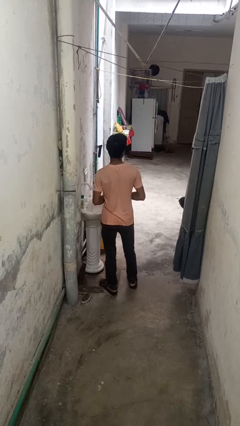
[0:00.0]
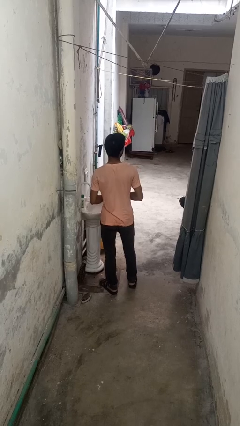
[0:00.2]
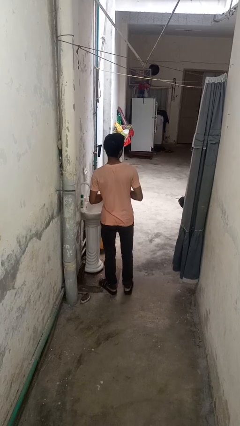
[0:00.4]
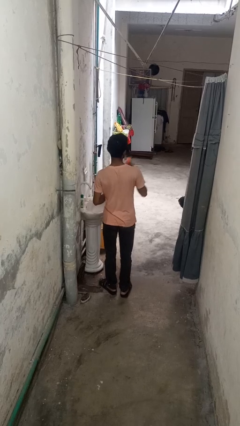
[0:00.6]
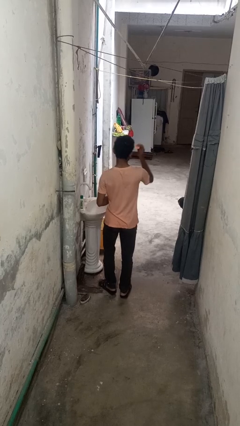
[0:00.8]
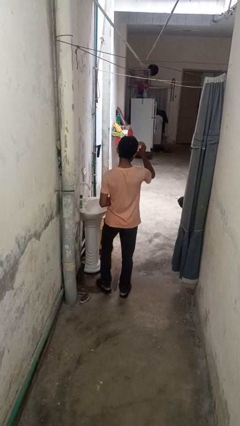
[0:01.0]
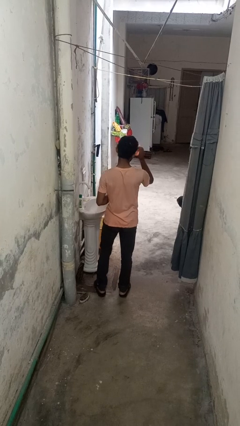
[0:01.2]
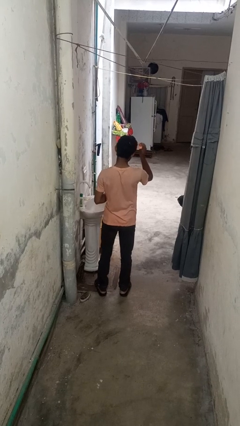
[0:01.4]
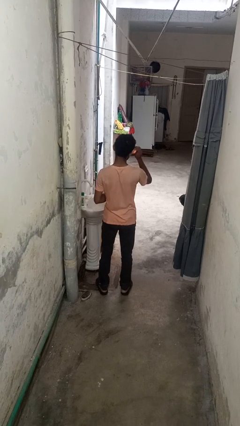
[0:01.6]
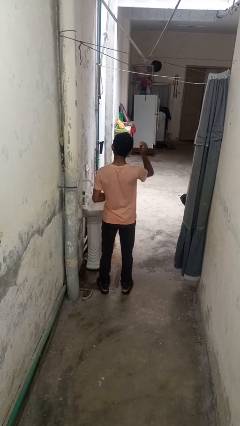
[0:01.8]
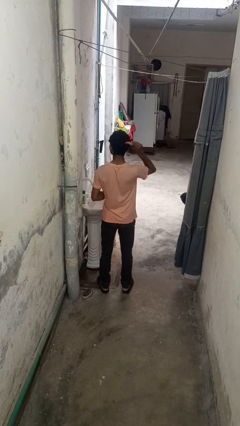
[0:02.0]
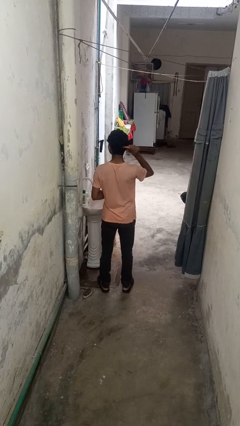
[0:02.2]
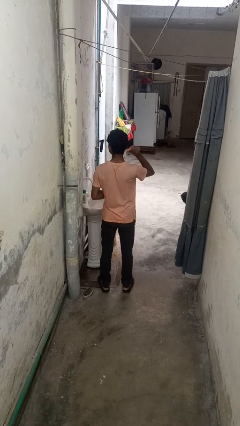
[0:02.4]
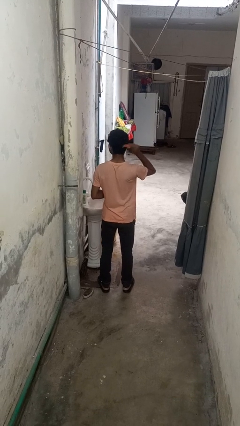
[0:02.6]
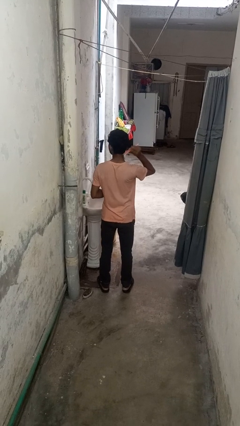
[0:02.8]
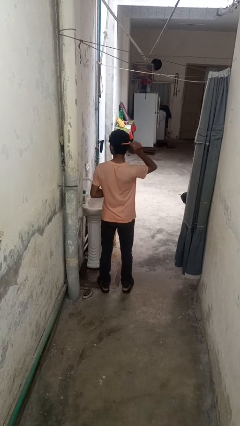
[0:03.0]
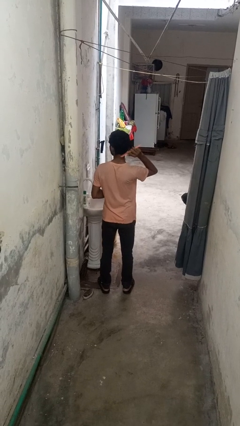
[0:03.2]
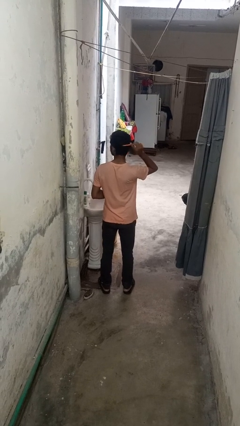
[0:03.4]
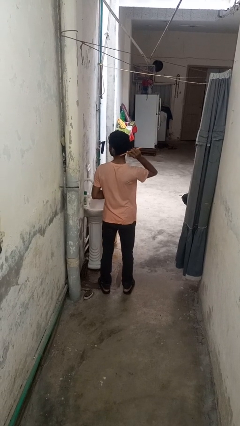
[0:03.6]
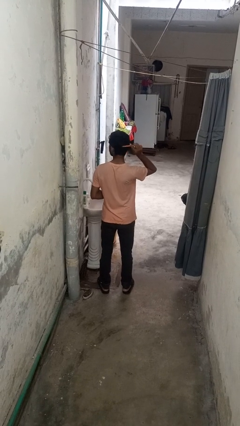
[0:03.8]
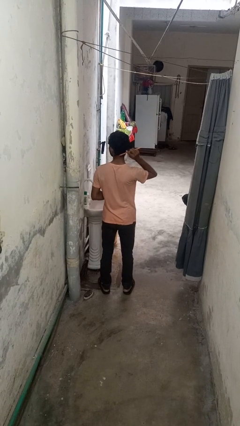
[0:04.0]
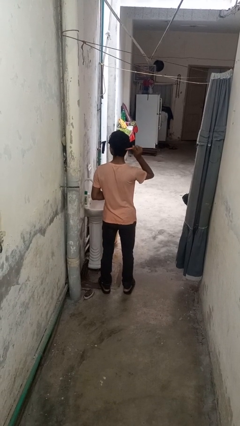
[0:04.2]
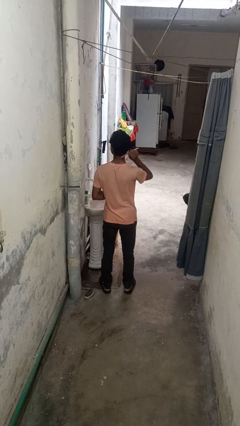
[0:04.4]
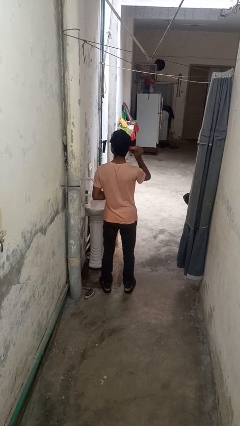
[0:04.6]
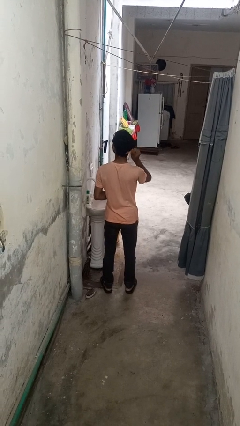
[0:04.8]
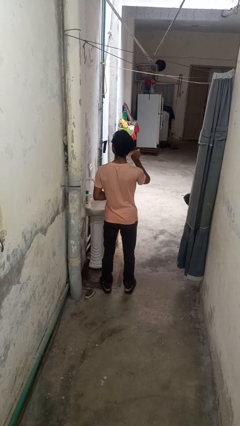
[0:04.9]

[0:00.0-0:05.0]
person brushes hair

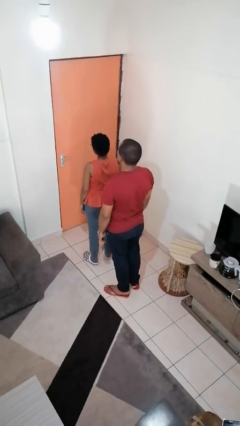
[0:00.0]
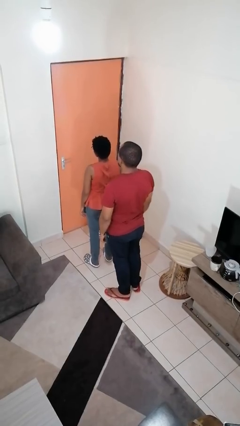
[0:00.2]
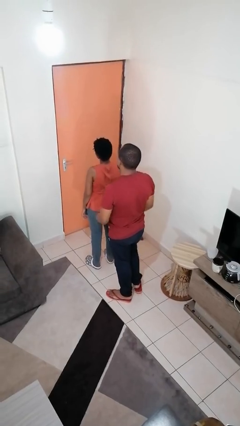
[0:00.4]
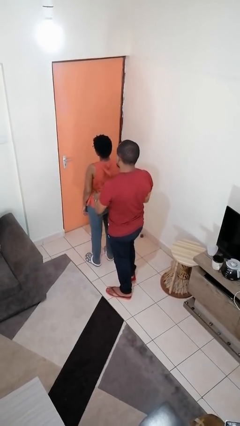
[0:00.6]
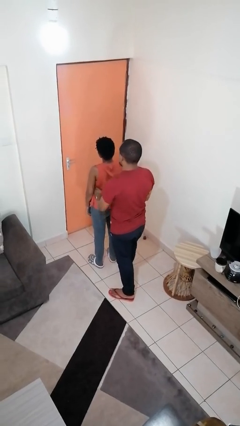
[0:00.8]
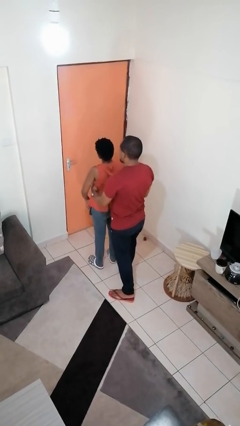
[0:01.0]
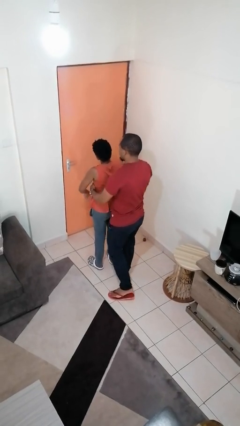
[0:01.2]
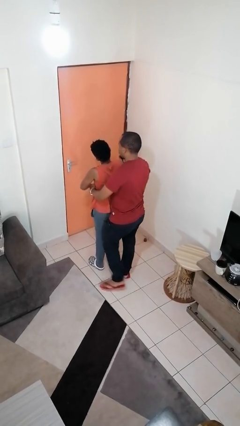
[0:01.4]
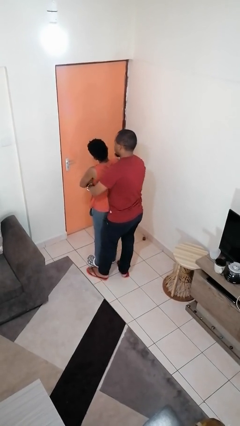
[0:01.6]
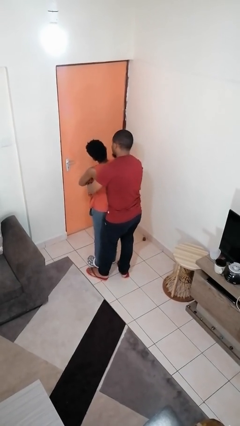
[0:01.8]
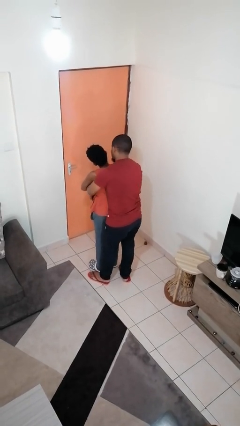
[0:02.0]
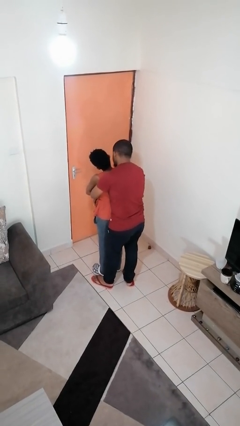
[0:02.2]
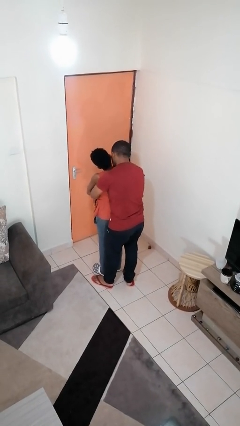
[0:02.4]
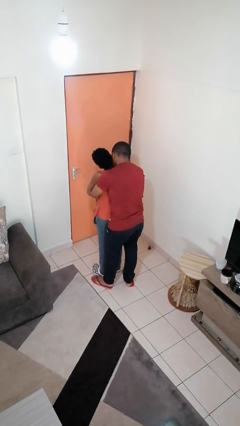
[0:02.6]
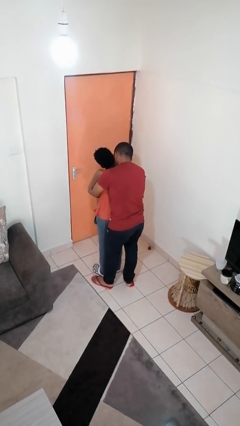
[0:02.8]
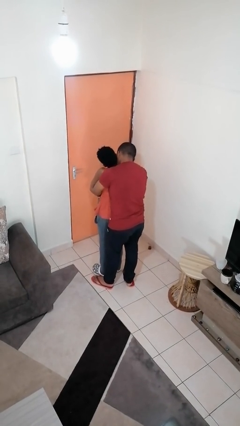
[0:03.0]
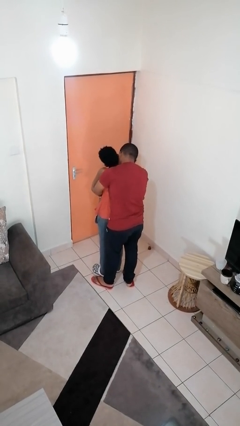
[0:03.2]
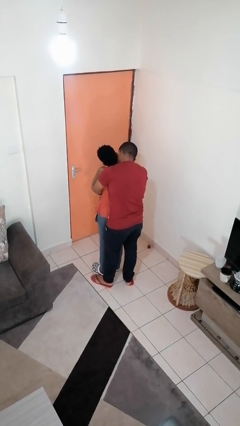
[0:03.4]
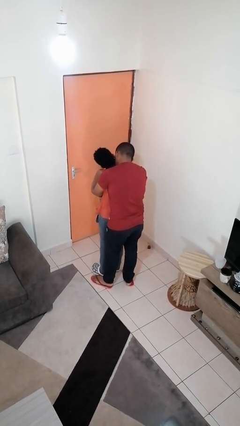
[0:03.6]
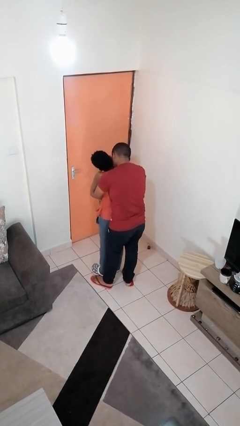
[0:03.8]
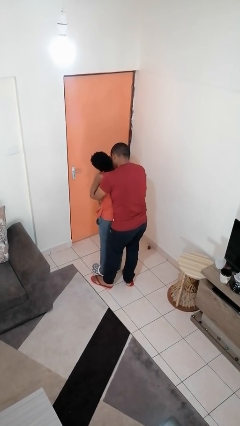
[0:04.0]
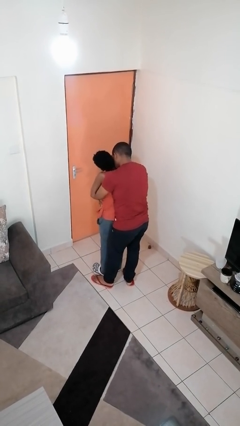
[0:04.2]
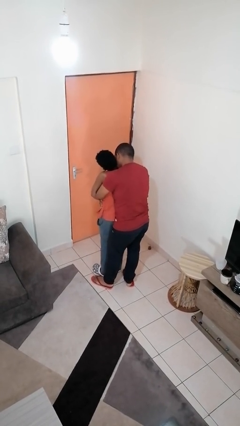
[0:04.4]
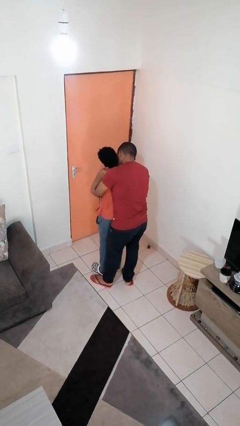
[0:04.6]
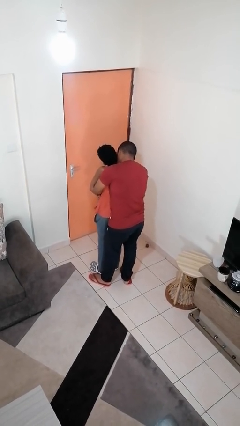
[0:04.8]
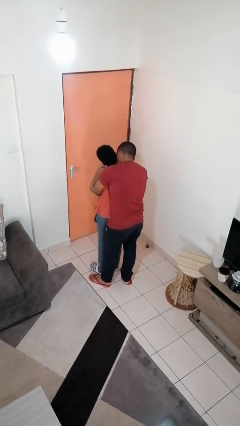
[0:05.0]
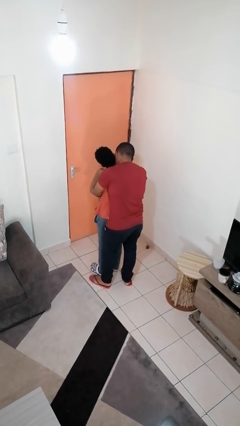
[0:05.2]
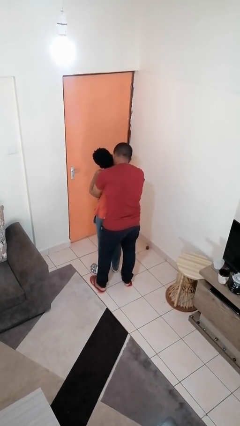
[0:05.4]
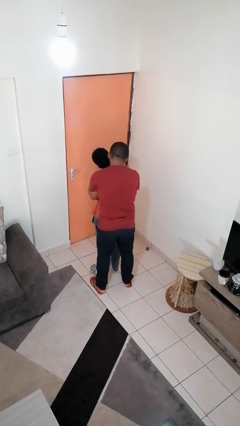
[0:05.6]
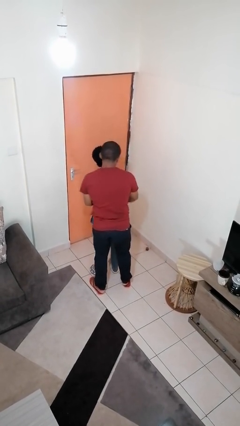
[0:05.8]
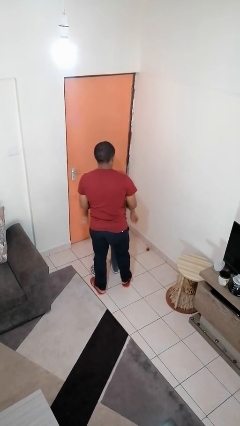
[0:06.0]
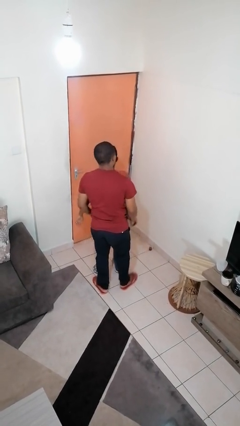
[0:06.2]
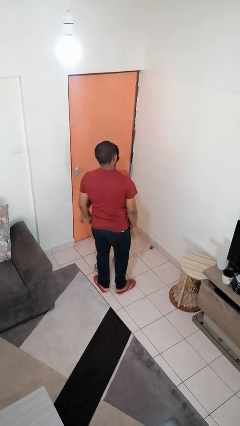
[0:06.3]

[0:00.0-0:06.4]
person hugs person from behind

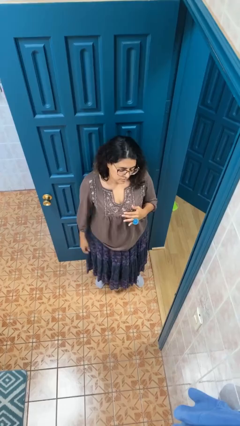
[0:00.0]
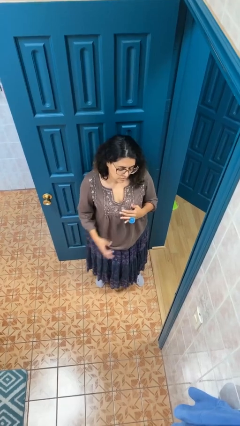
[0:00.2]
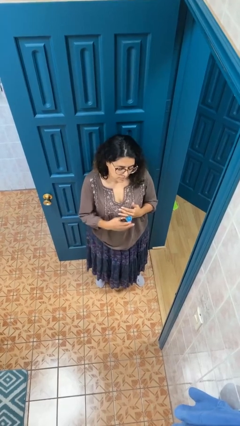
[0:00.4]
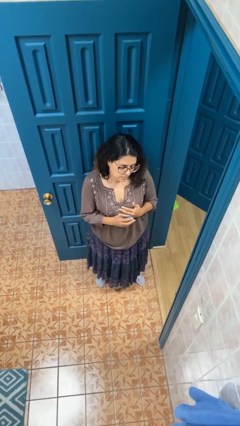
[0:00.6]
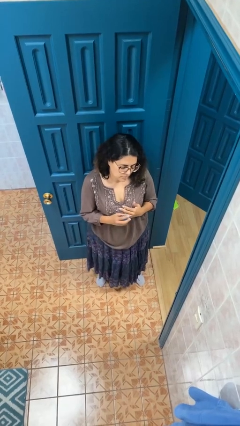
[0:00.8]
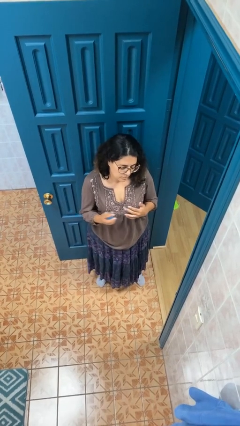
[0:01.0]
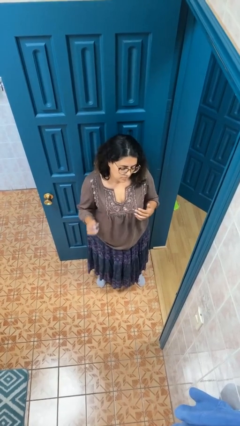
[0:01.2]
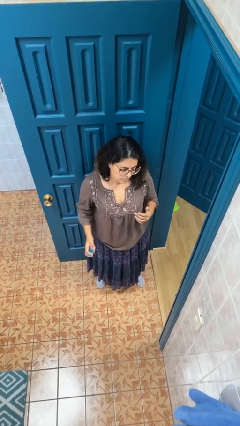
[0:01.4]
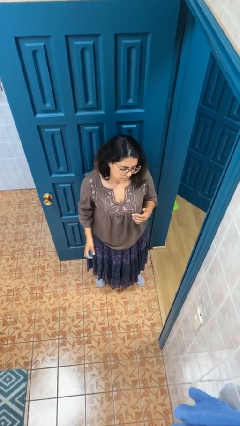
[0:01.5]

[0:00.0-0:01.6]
person takes off ring

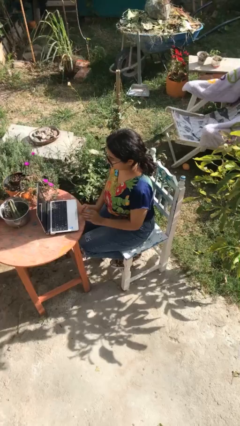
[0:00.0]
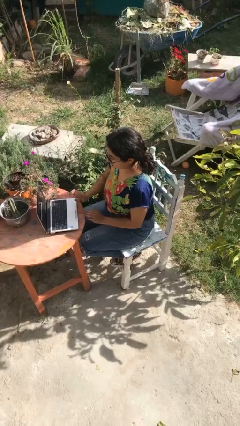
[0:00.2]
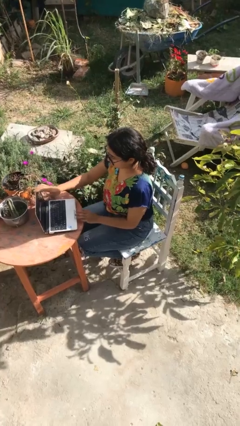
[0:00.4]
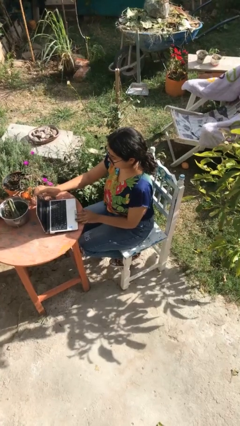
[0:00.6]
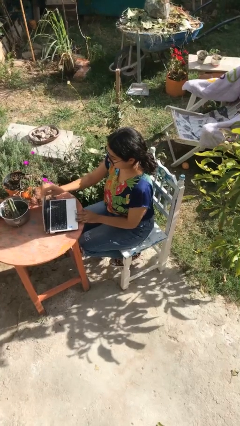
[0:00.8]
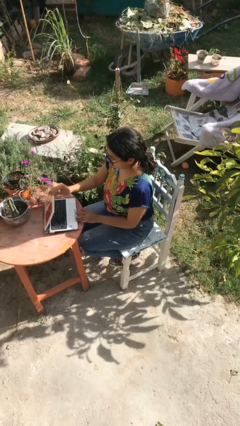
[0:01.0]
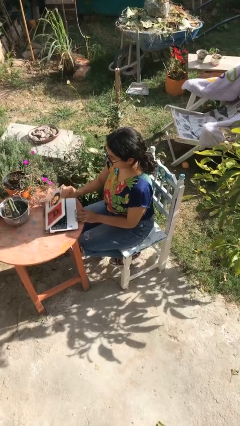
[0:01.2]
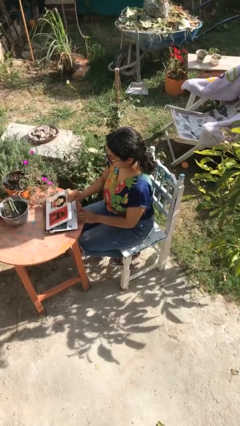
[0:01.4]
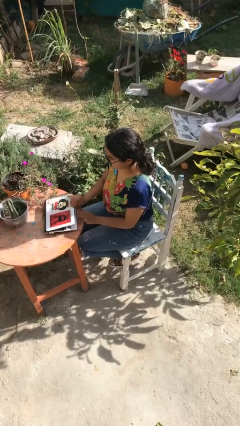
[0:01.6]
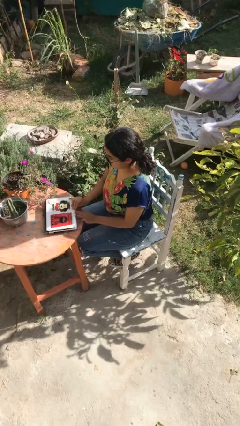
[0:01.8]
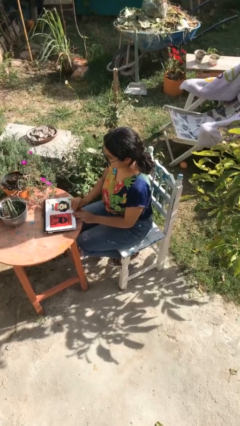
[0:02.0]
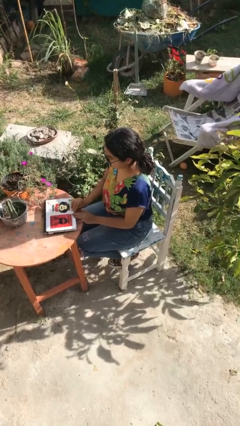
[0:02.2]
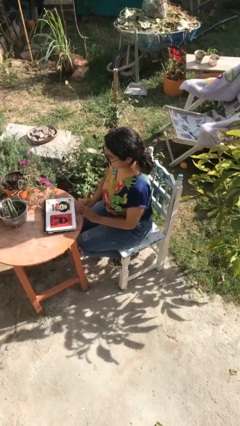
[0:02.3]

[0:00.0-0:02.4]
person closes laptop

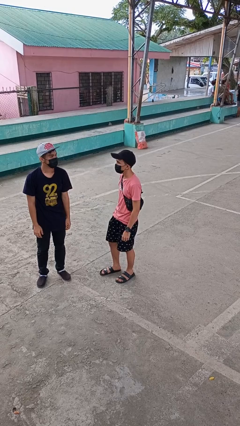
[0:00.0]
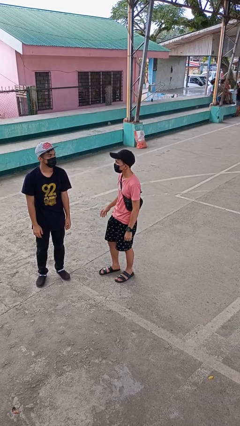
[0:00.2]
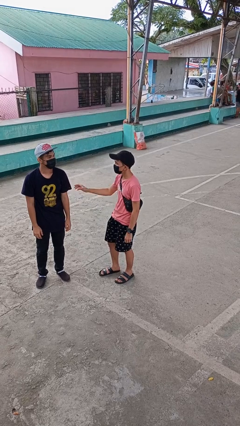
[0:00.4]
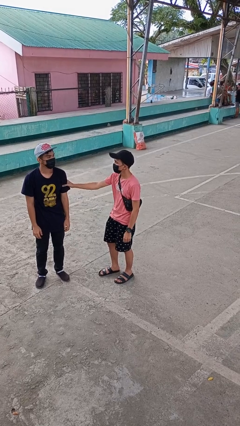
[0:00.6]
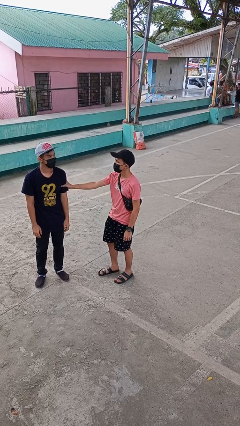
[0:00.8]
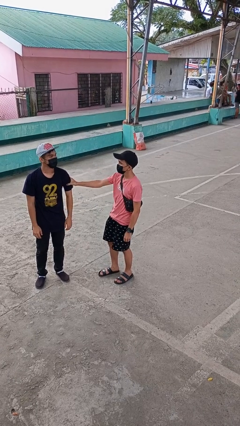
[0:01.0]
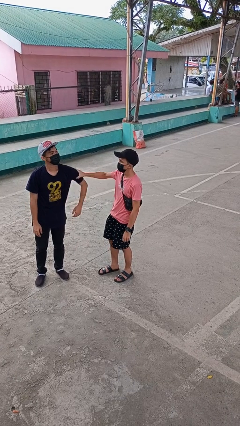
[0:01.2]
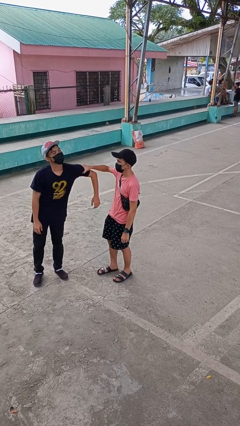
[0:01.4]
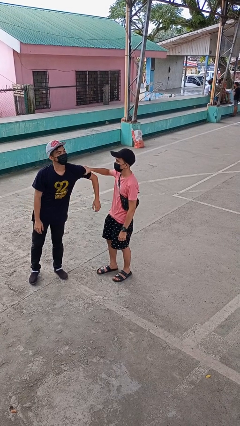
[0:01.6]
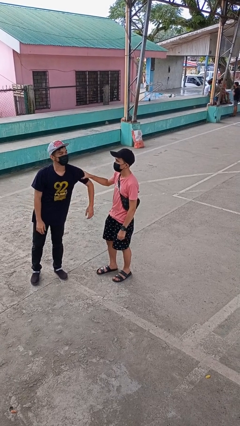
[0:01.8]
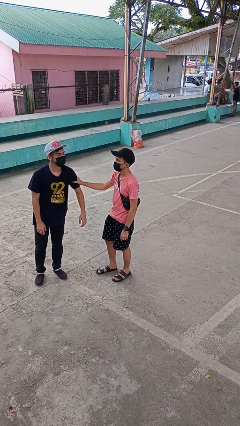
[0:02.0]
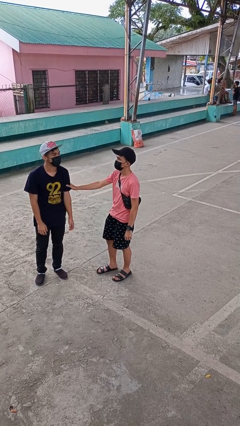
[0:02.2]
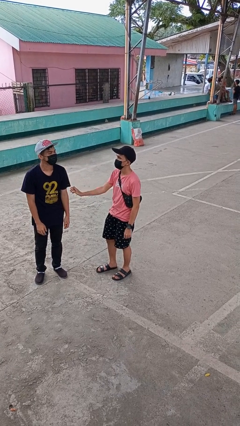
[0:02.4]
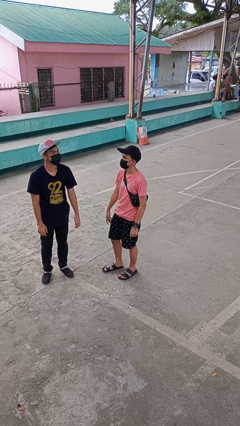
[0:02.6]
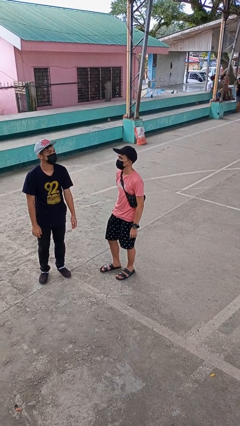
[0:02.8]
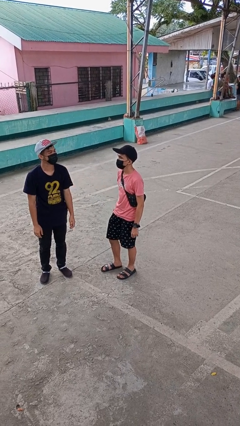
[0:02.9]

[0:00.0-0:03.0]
person grabs person by bicep
